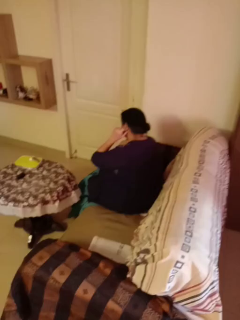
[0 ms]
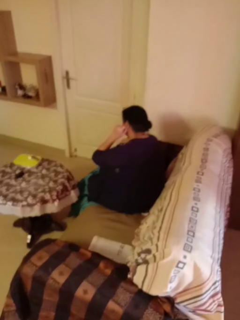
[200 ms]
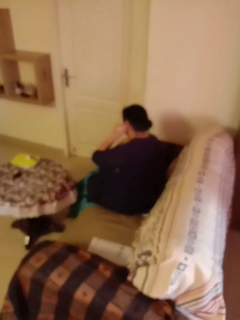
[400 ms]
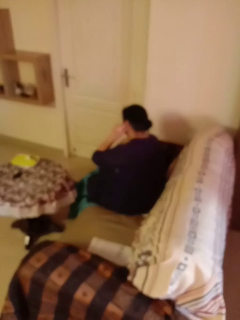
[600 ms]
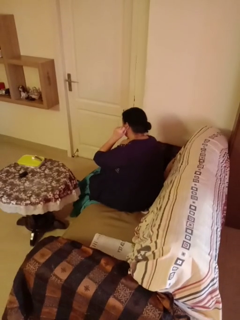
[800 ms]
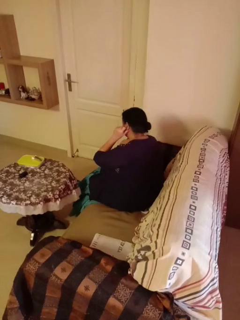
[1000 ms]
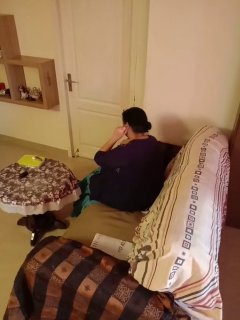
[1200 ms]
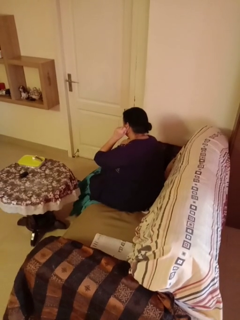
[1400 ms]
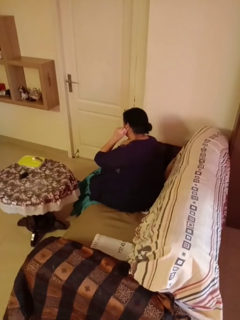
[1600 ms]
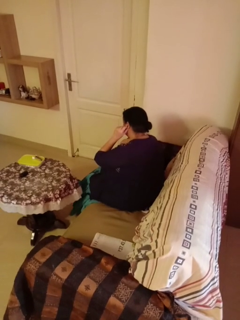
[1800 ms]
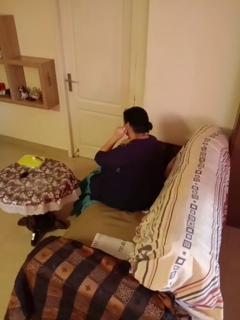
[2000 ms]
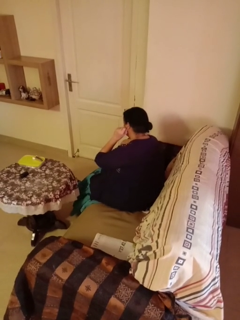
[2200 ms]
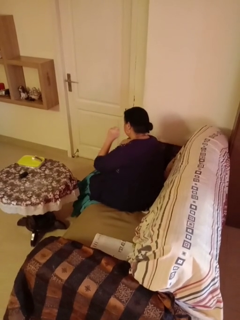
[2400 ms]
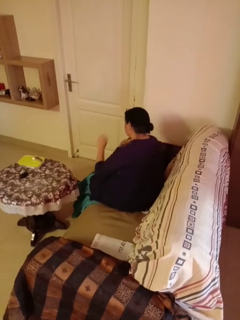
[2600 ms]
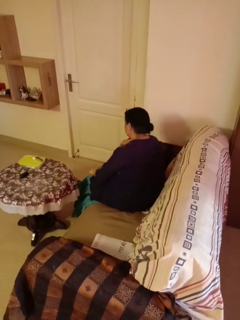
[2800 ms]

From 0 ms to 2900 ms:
person touches earlobe

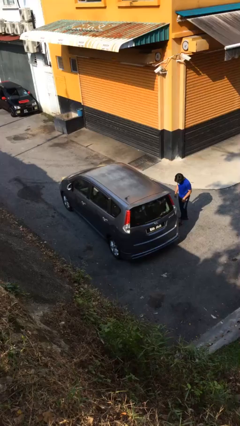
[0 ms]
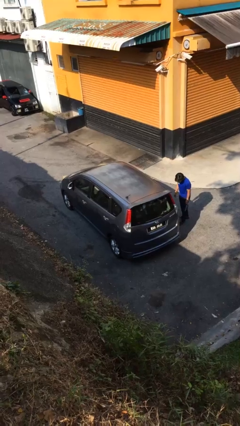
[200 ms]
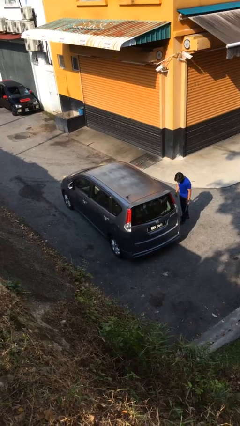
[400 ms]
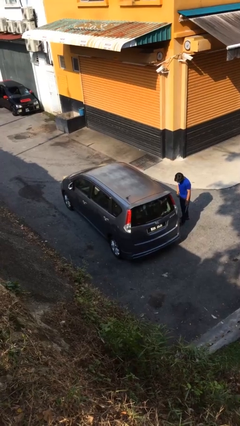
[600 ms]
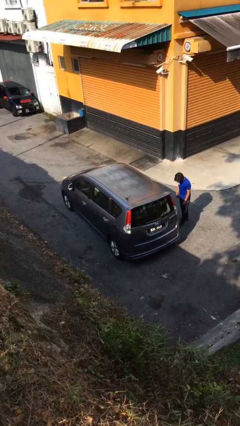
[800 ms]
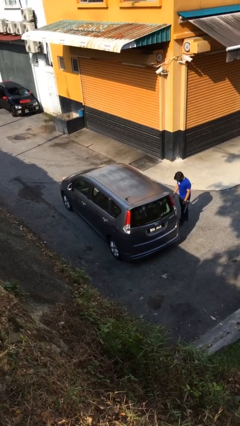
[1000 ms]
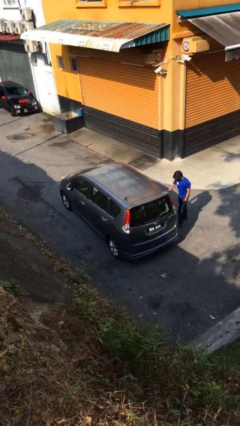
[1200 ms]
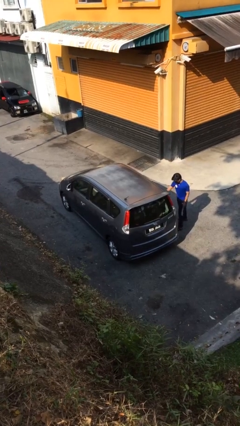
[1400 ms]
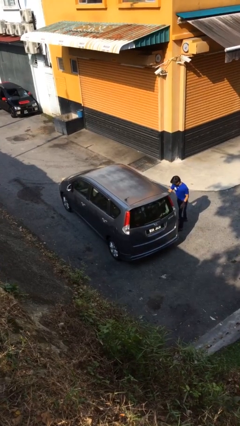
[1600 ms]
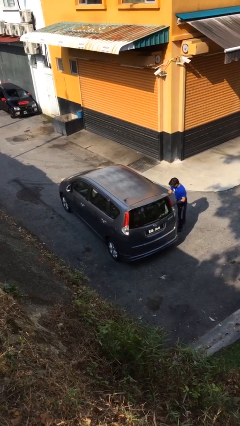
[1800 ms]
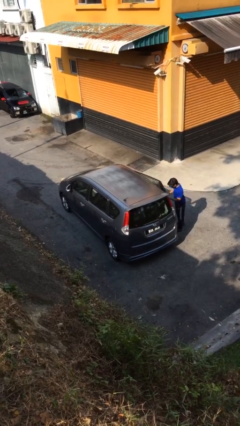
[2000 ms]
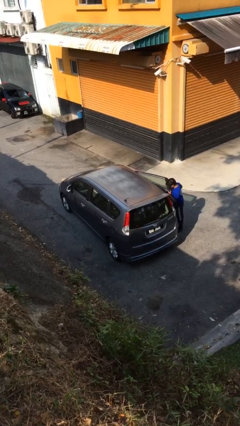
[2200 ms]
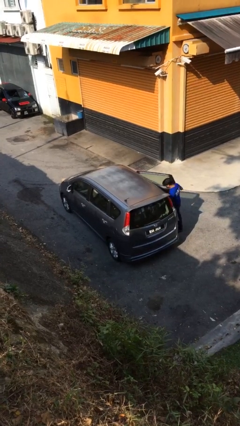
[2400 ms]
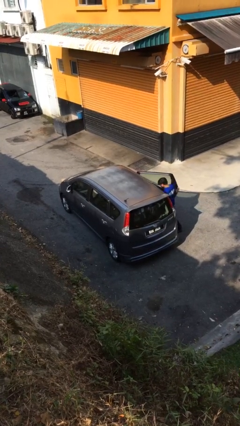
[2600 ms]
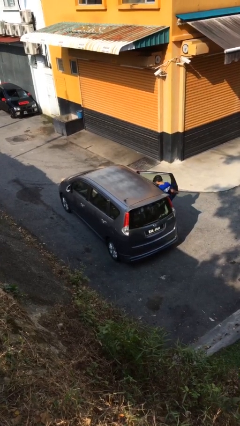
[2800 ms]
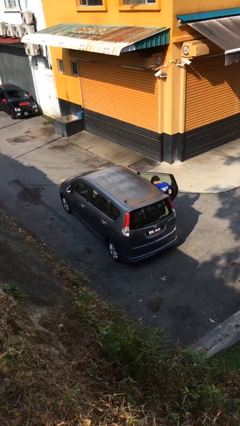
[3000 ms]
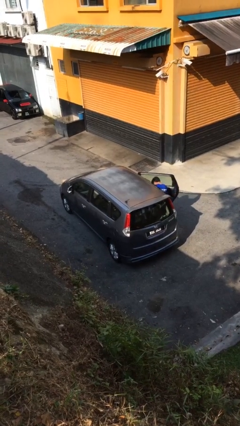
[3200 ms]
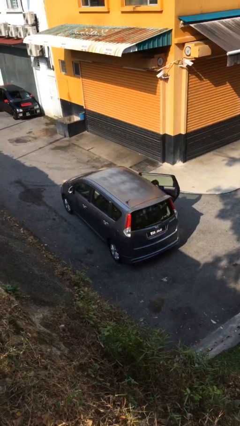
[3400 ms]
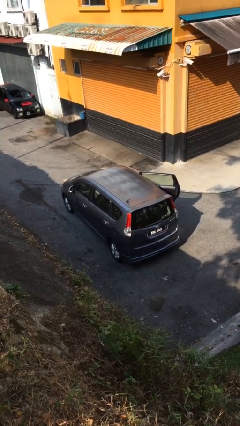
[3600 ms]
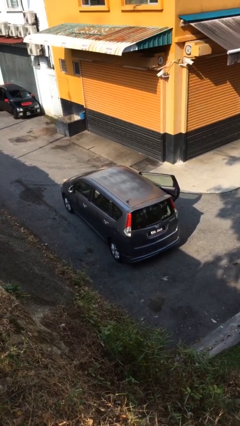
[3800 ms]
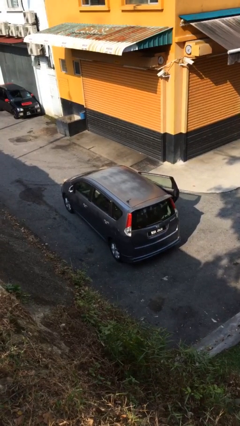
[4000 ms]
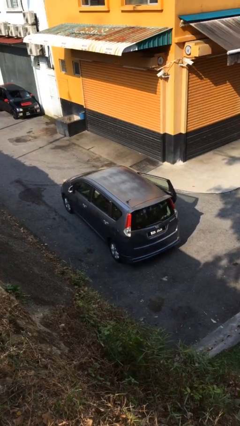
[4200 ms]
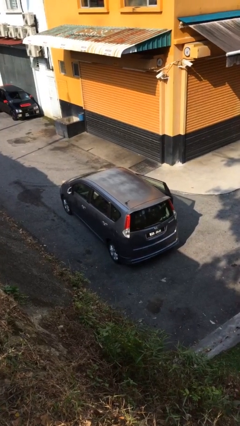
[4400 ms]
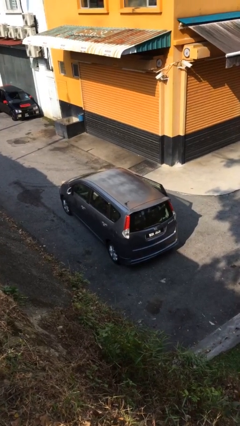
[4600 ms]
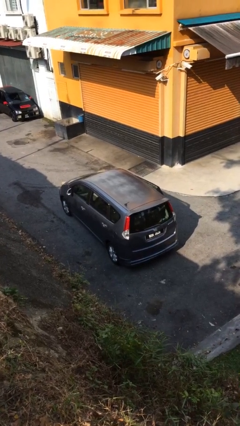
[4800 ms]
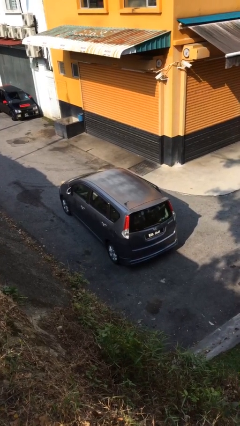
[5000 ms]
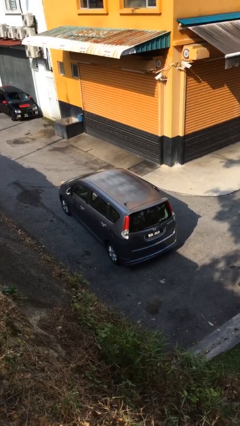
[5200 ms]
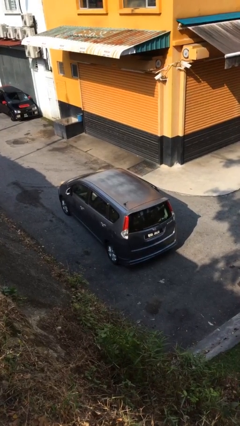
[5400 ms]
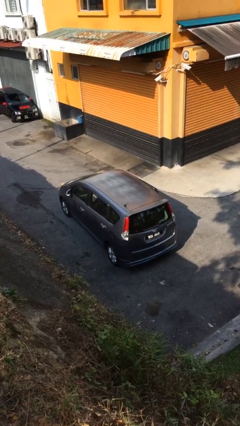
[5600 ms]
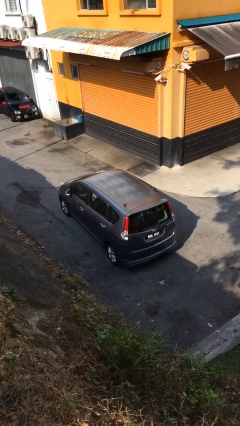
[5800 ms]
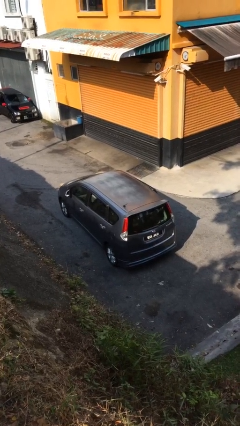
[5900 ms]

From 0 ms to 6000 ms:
car picks up person

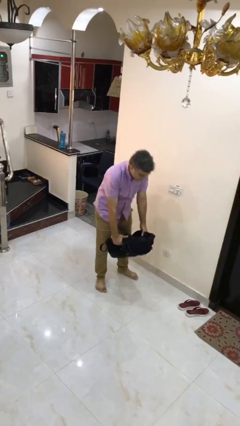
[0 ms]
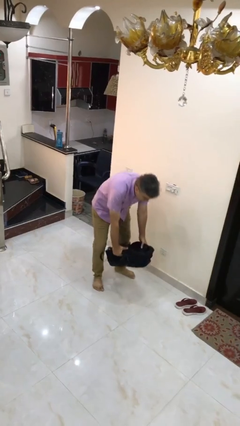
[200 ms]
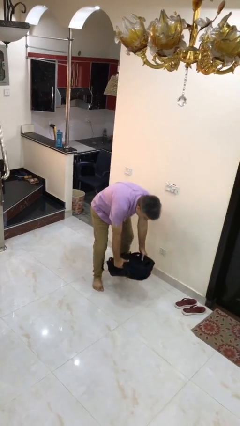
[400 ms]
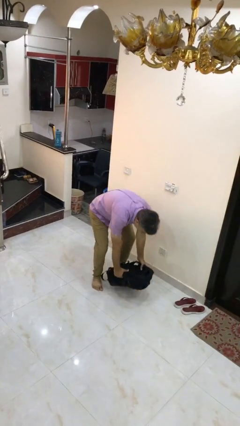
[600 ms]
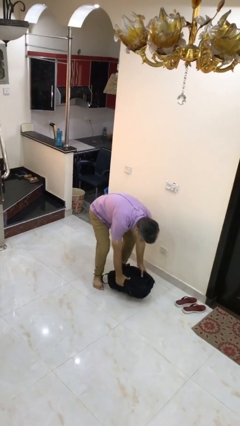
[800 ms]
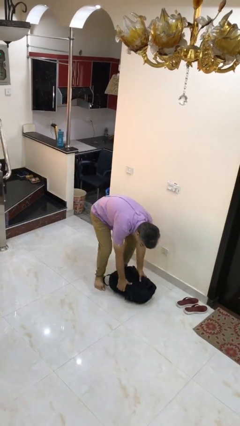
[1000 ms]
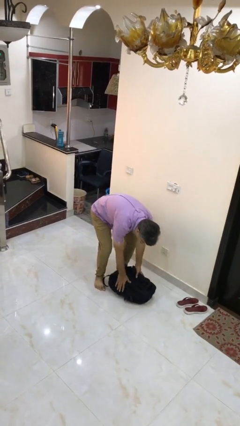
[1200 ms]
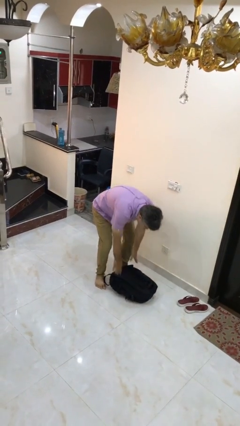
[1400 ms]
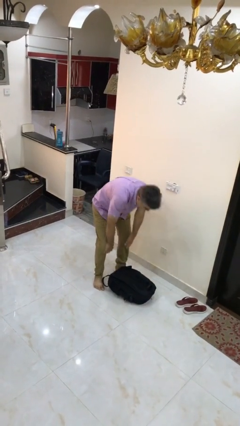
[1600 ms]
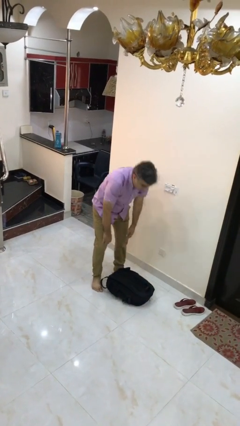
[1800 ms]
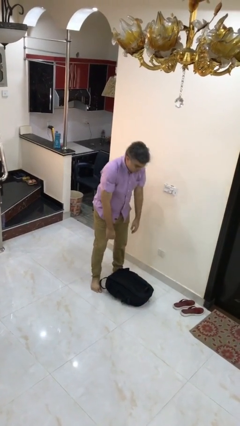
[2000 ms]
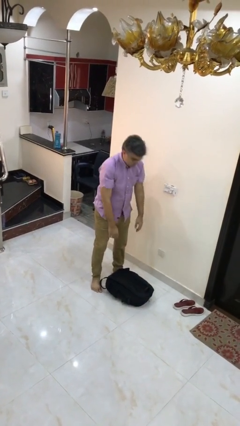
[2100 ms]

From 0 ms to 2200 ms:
person puts down object on floor

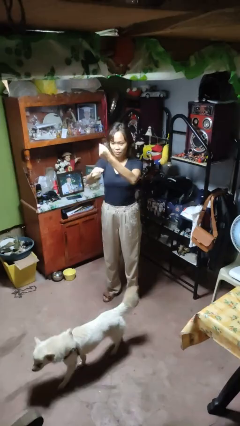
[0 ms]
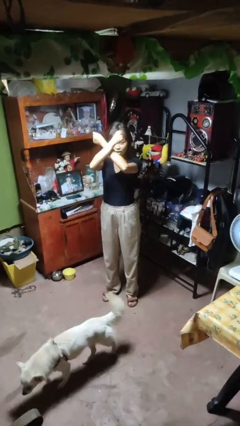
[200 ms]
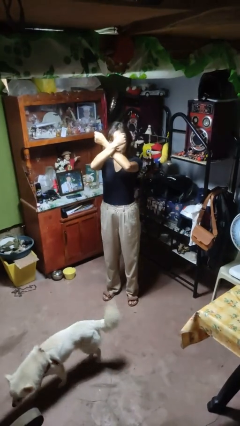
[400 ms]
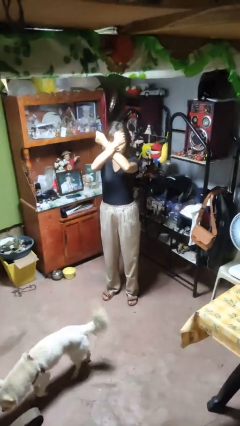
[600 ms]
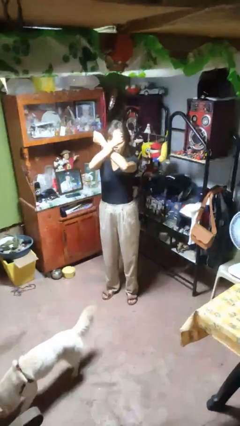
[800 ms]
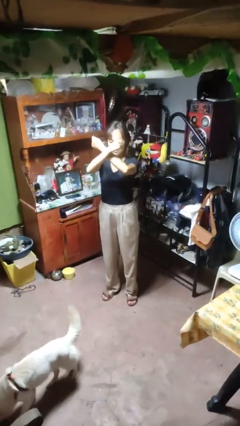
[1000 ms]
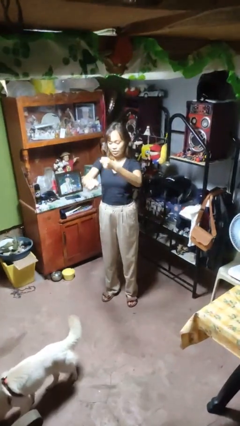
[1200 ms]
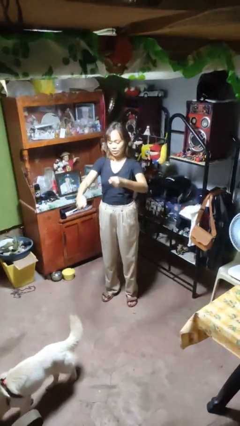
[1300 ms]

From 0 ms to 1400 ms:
person gestures arms x

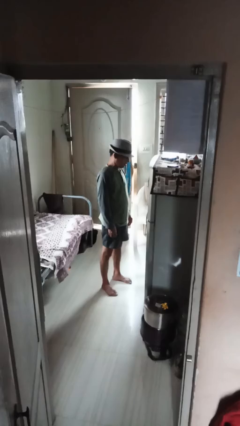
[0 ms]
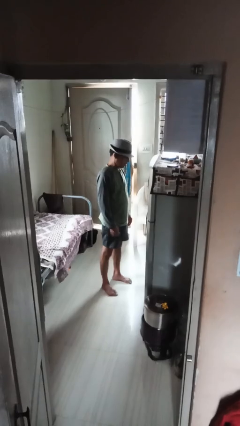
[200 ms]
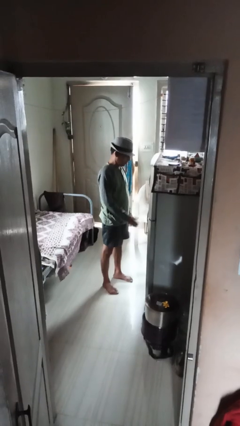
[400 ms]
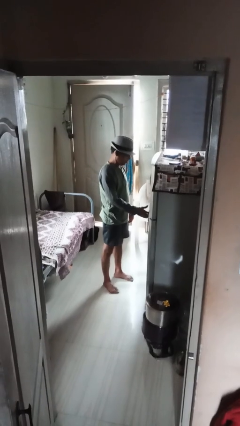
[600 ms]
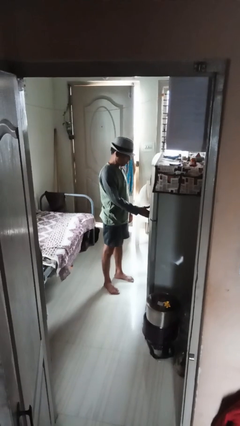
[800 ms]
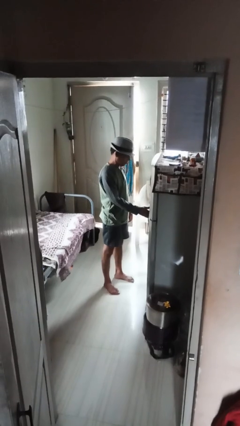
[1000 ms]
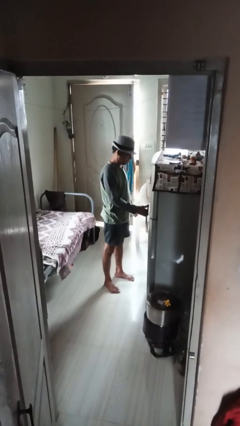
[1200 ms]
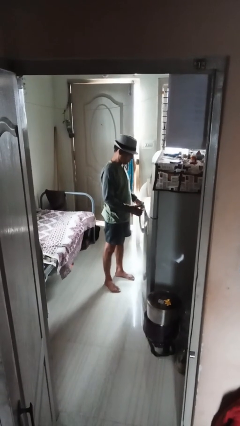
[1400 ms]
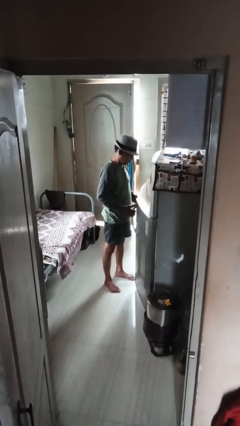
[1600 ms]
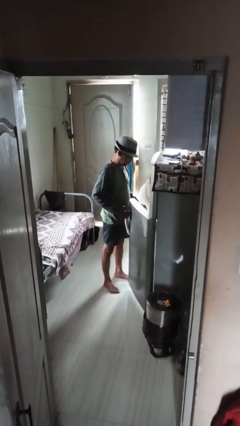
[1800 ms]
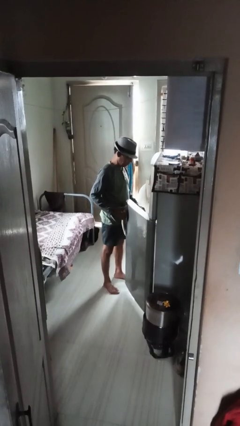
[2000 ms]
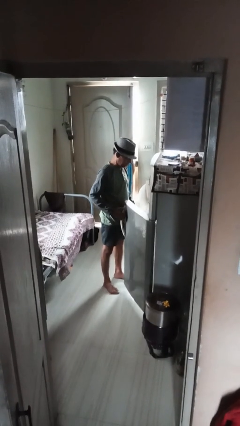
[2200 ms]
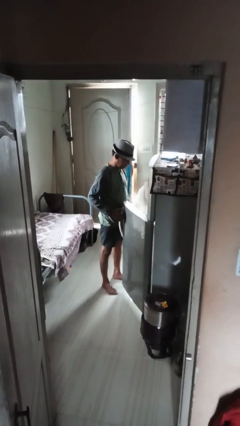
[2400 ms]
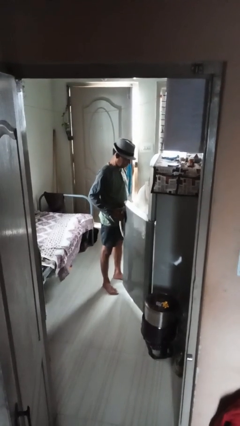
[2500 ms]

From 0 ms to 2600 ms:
person opens refrigerator

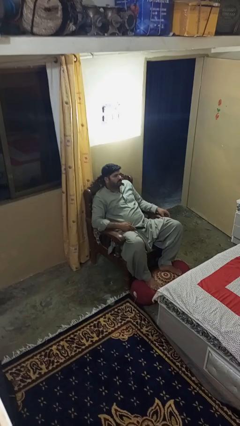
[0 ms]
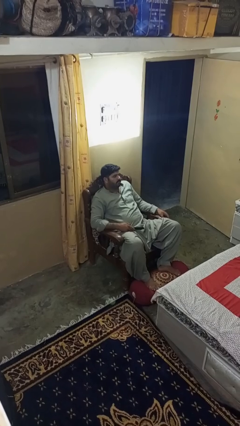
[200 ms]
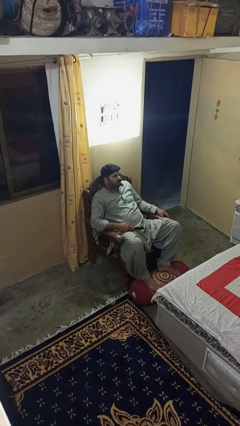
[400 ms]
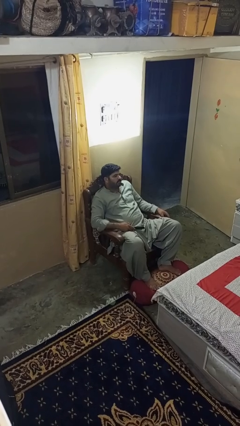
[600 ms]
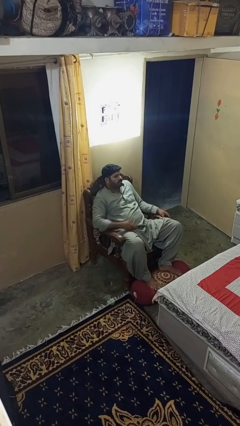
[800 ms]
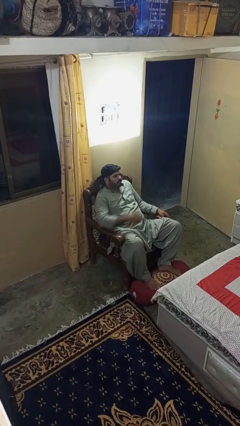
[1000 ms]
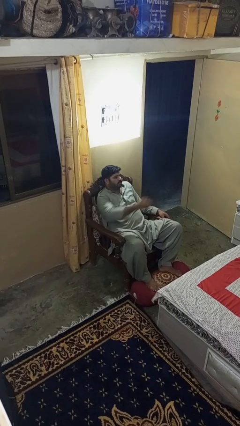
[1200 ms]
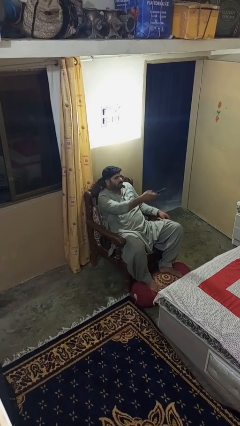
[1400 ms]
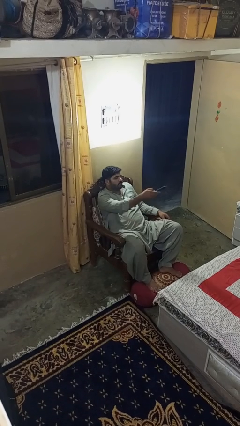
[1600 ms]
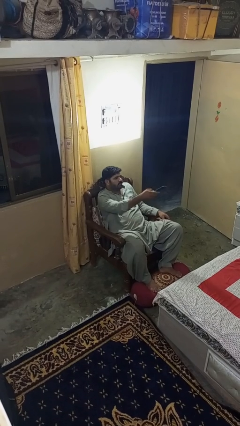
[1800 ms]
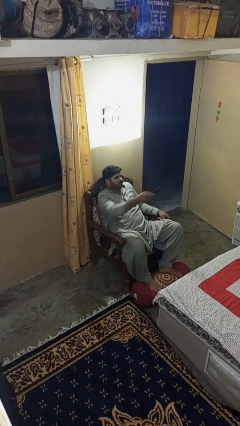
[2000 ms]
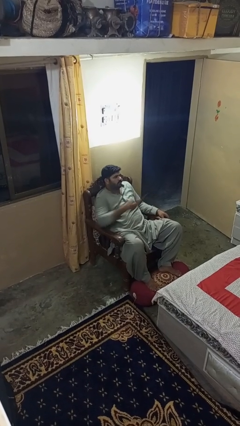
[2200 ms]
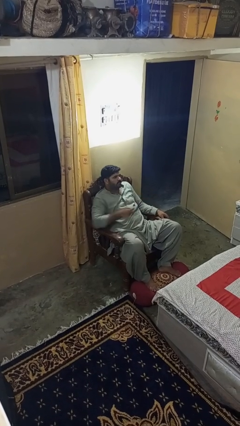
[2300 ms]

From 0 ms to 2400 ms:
person uses television remote

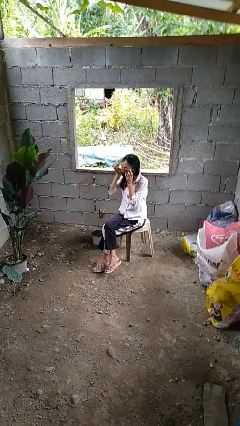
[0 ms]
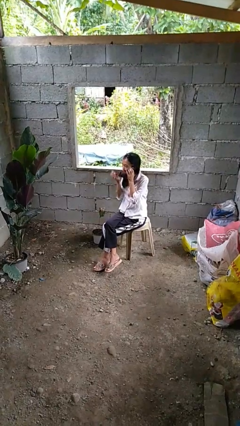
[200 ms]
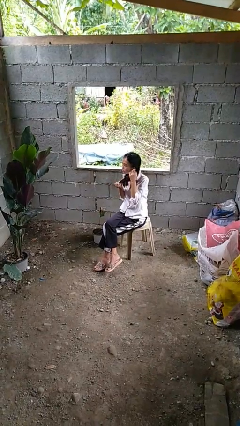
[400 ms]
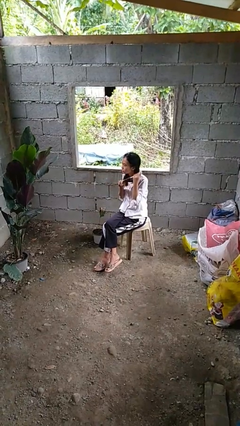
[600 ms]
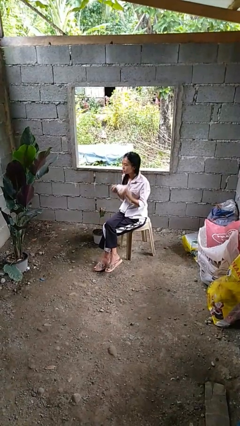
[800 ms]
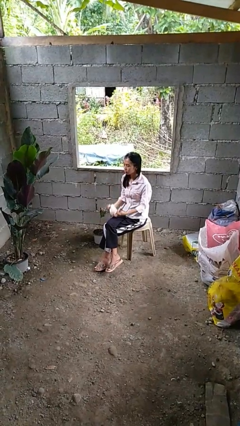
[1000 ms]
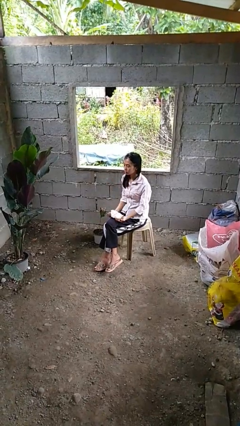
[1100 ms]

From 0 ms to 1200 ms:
person takes off facemask
